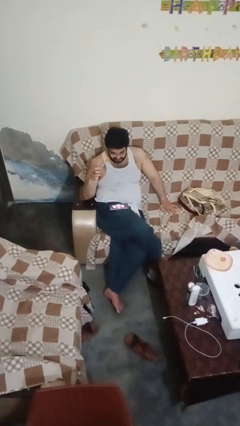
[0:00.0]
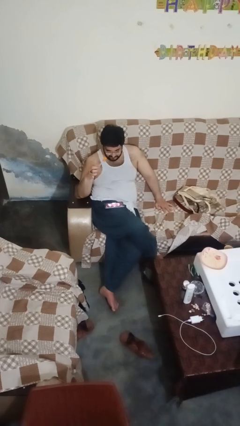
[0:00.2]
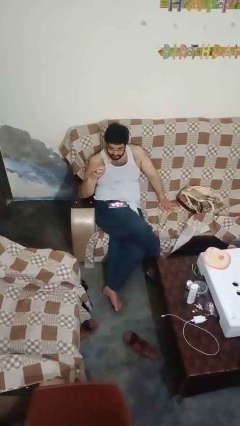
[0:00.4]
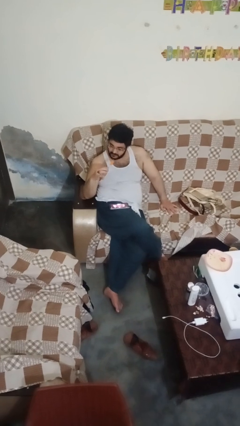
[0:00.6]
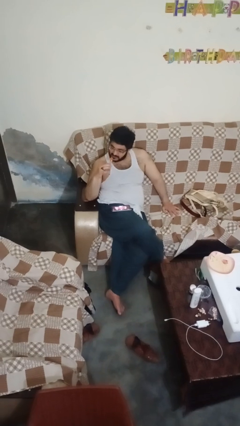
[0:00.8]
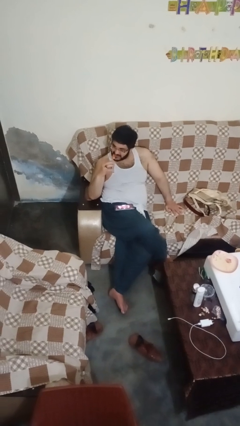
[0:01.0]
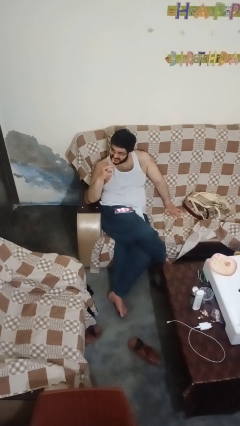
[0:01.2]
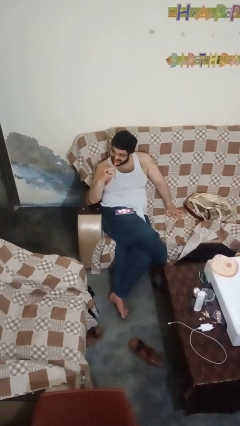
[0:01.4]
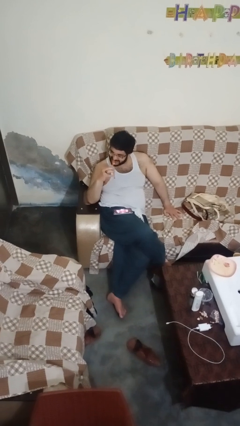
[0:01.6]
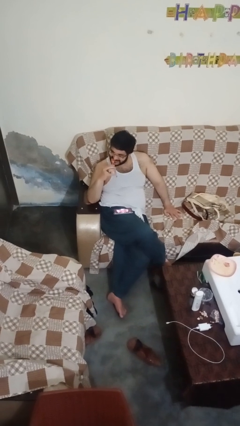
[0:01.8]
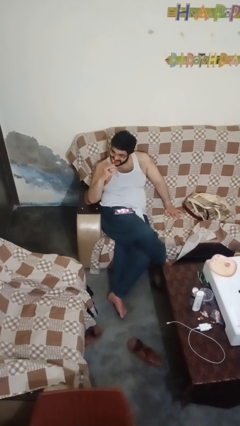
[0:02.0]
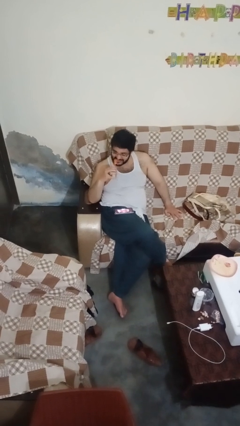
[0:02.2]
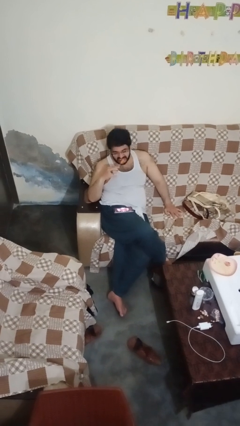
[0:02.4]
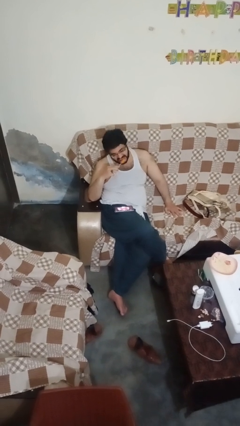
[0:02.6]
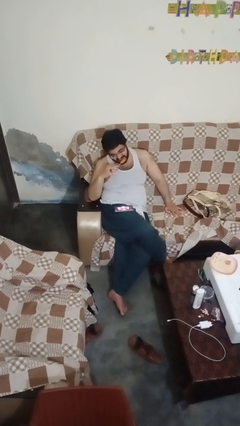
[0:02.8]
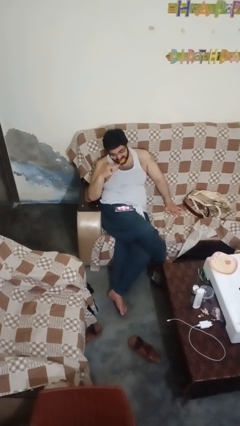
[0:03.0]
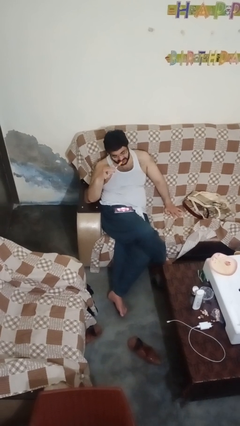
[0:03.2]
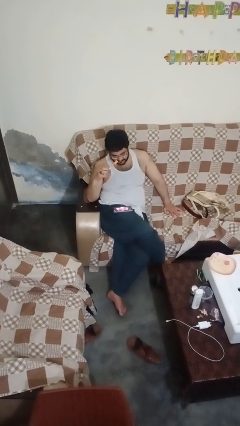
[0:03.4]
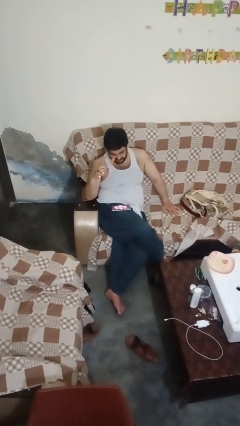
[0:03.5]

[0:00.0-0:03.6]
person brushes teeth

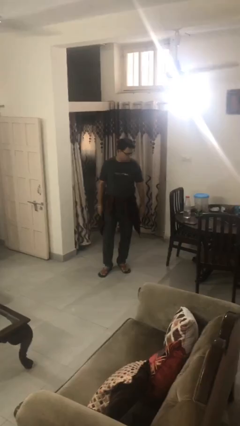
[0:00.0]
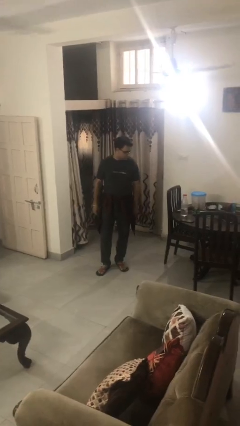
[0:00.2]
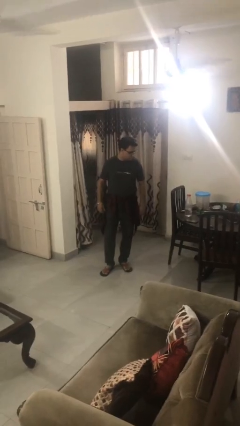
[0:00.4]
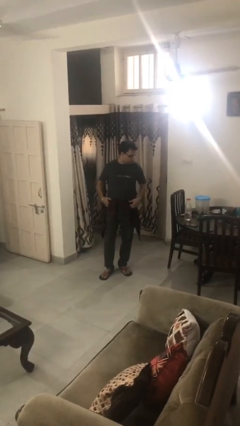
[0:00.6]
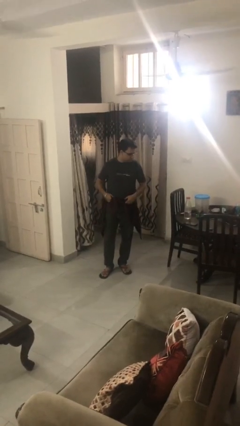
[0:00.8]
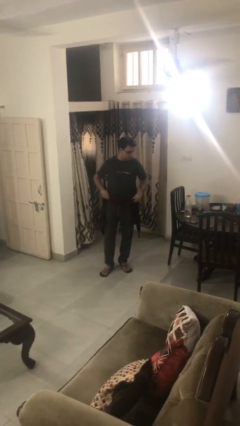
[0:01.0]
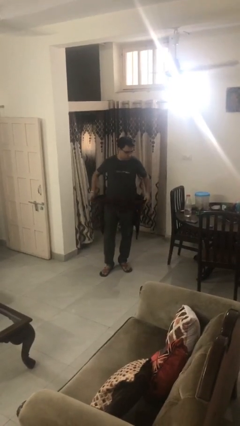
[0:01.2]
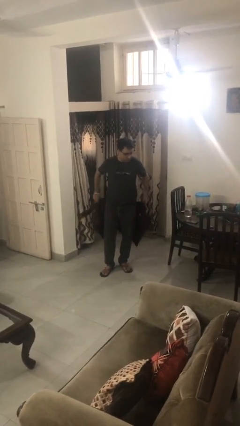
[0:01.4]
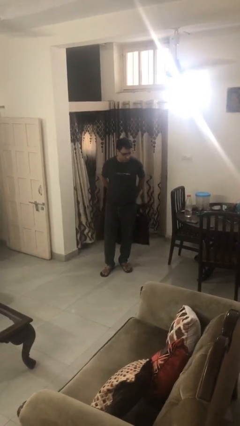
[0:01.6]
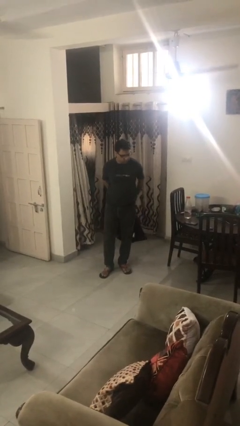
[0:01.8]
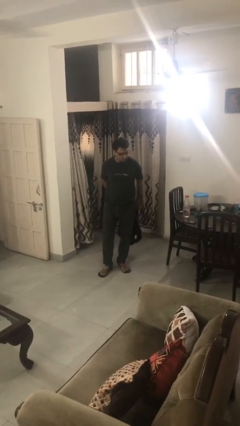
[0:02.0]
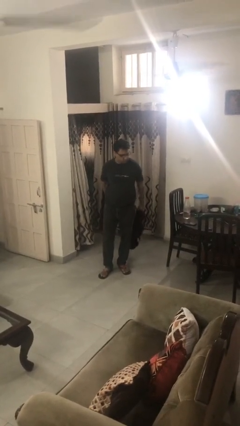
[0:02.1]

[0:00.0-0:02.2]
person unties jacket around waist

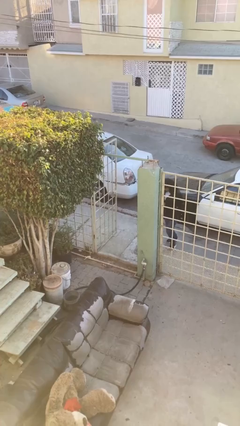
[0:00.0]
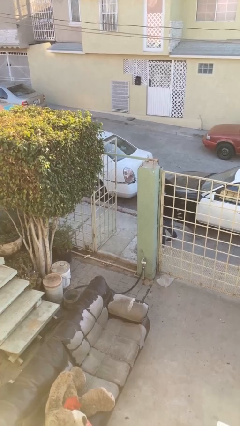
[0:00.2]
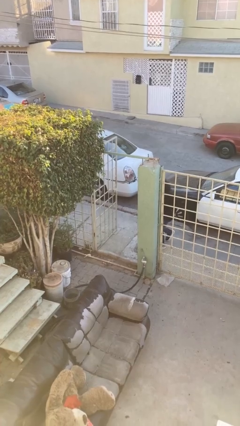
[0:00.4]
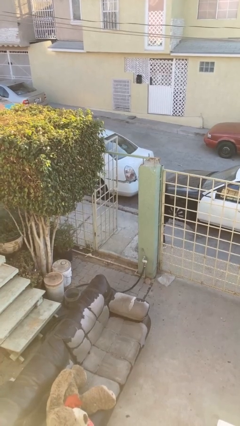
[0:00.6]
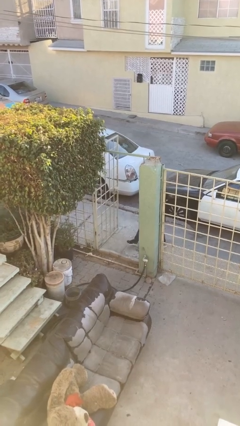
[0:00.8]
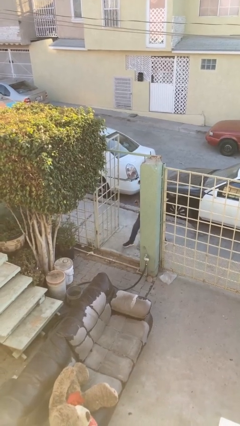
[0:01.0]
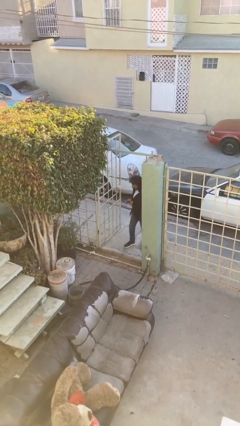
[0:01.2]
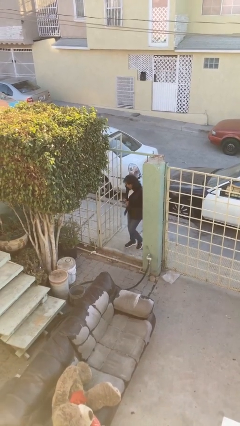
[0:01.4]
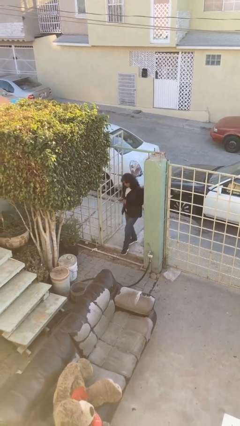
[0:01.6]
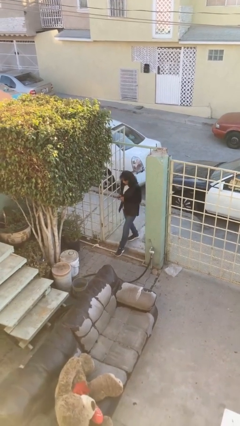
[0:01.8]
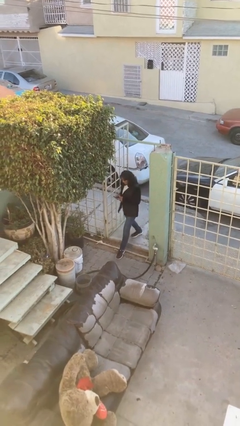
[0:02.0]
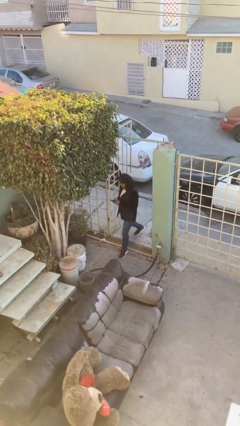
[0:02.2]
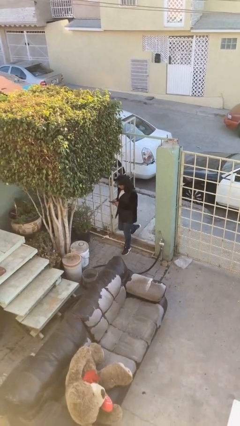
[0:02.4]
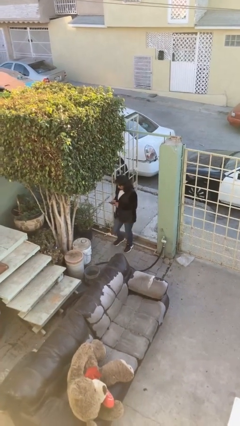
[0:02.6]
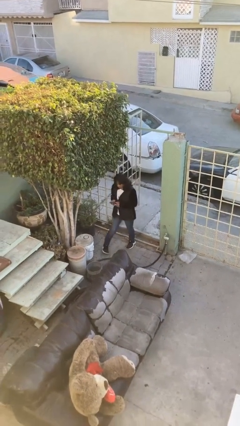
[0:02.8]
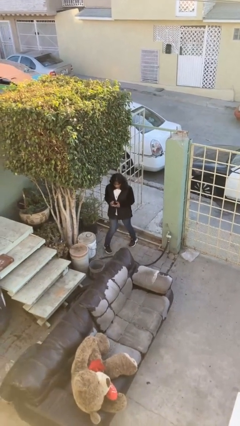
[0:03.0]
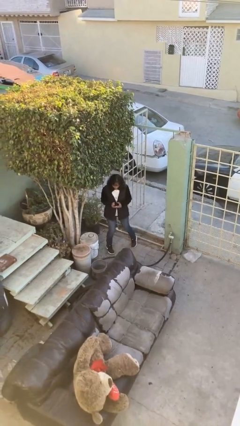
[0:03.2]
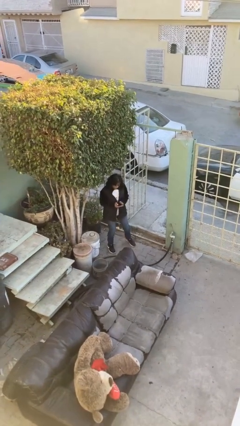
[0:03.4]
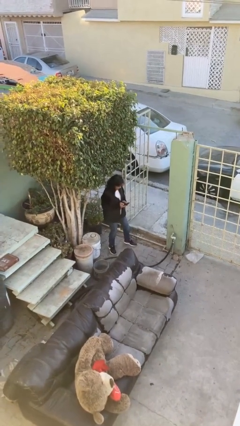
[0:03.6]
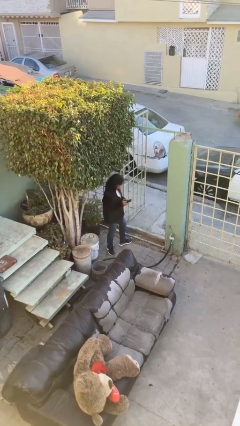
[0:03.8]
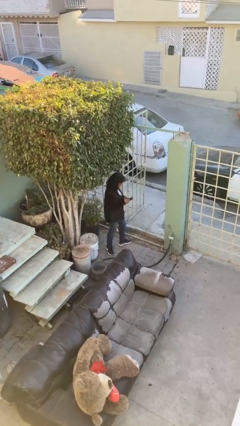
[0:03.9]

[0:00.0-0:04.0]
person enters scene through structure

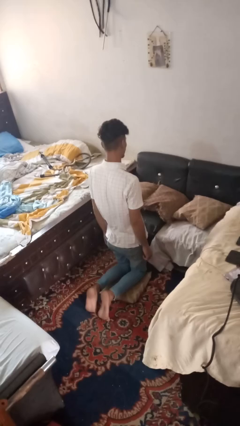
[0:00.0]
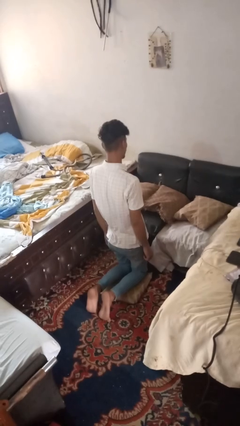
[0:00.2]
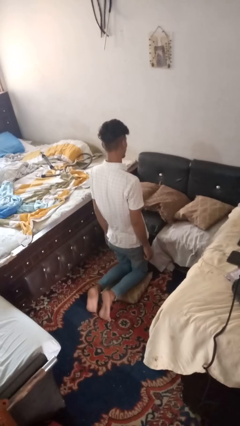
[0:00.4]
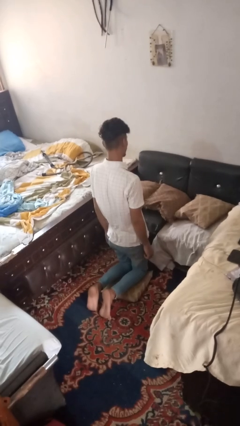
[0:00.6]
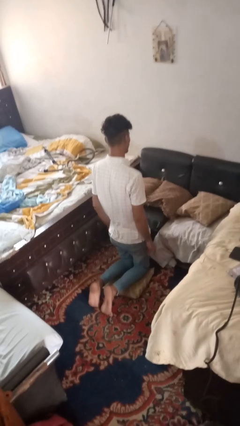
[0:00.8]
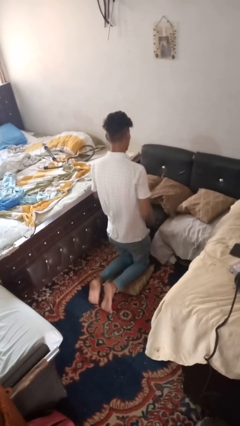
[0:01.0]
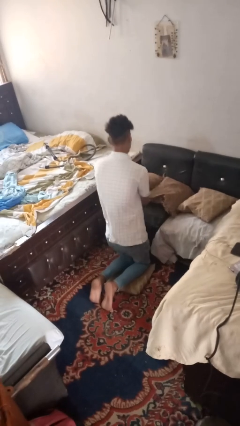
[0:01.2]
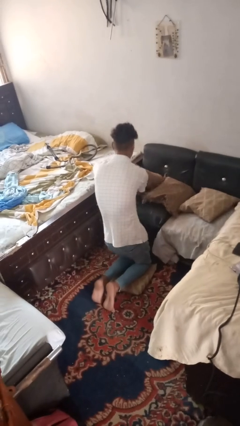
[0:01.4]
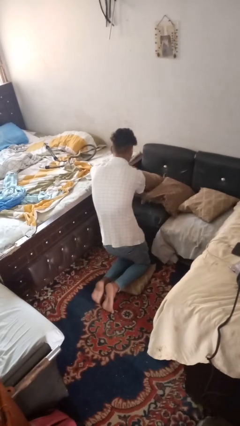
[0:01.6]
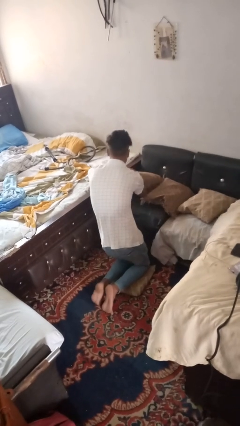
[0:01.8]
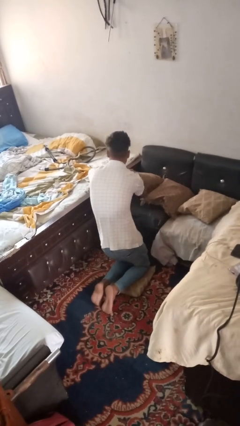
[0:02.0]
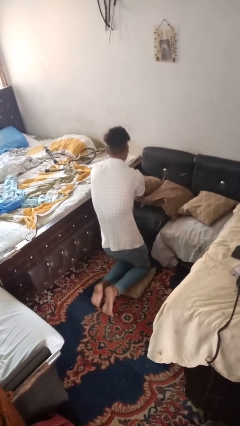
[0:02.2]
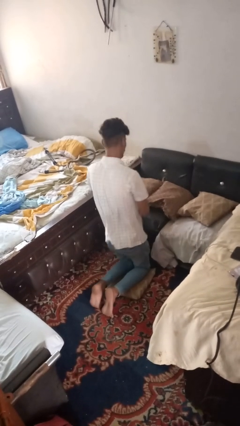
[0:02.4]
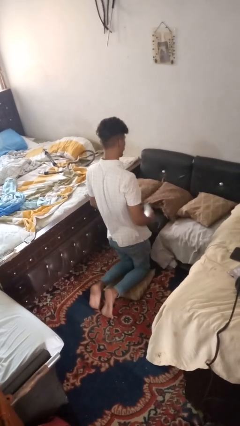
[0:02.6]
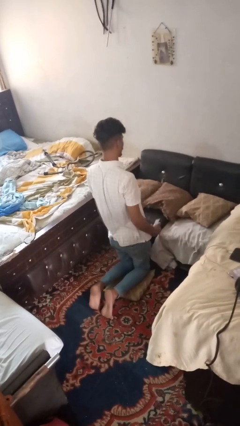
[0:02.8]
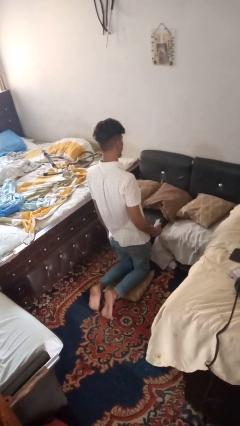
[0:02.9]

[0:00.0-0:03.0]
person searches in couch

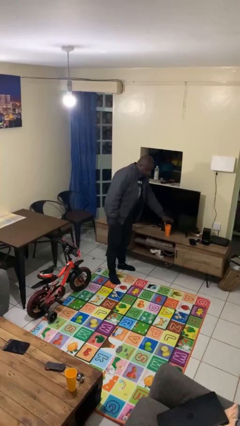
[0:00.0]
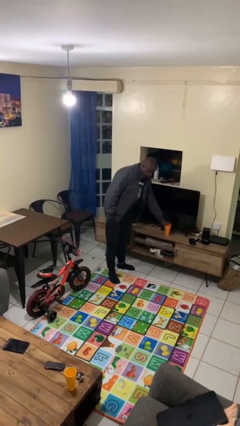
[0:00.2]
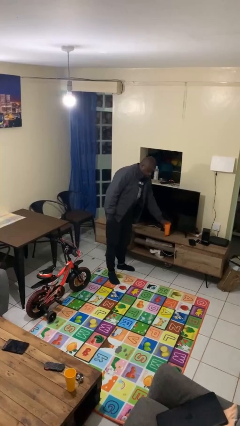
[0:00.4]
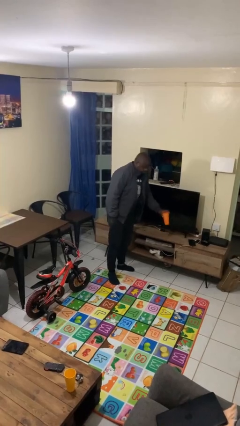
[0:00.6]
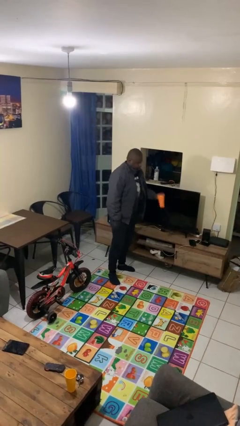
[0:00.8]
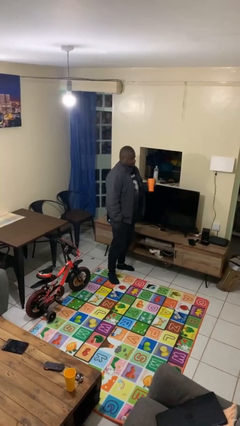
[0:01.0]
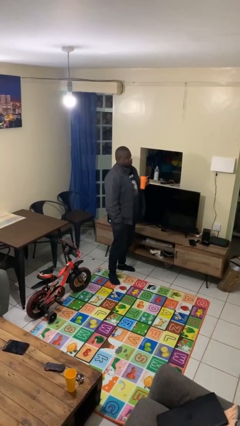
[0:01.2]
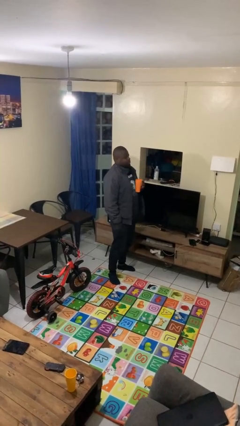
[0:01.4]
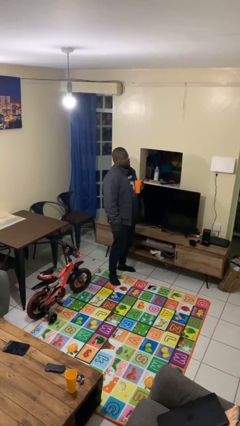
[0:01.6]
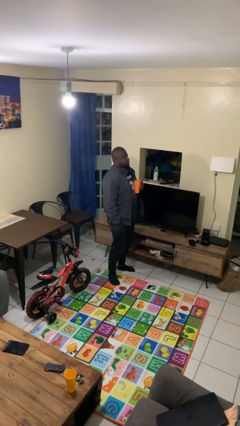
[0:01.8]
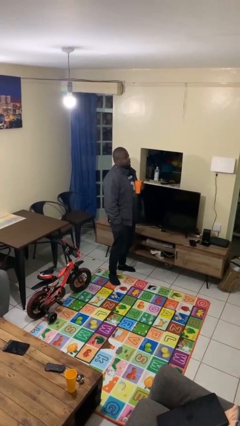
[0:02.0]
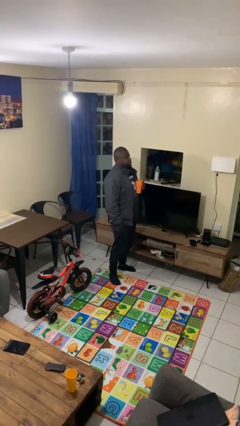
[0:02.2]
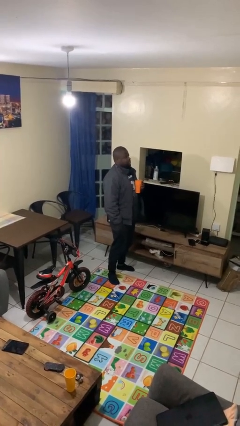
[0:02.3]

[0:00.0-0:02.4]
person picks up object from countertop

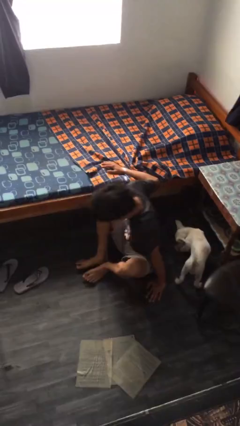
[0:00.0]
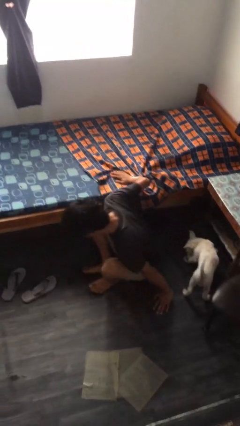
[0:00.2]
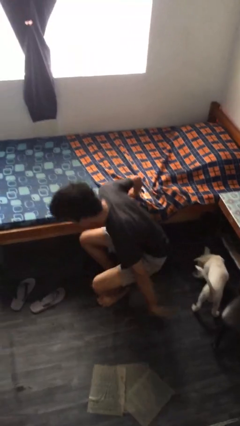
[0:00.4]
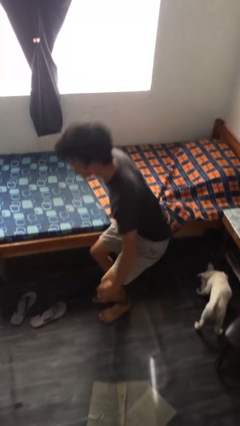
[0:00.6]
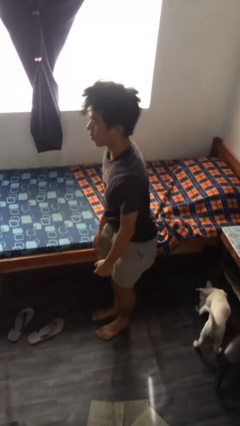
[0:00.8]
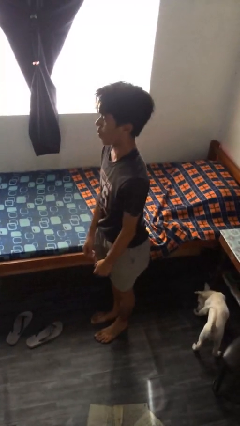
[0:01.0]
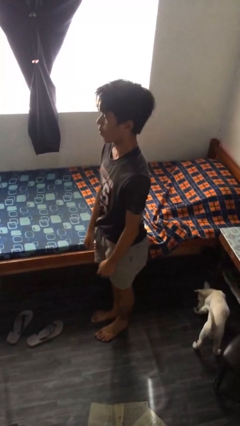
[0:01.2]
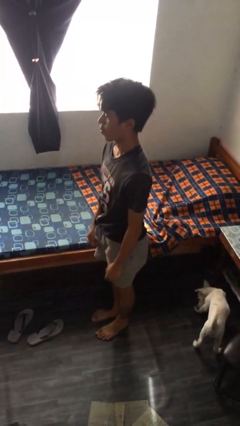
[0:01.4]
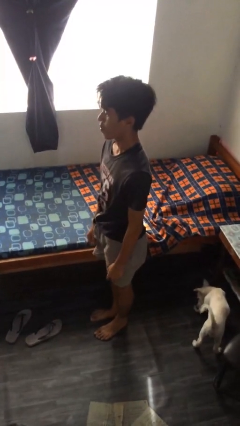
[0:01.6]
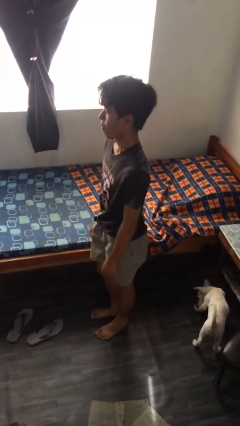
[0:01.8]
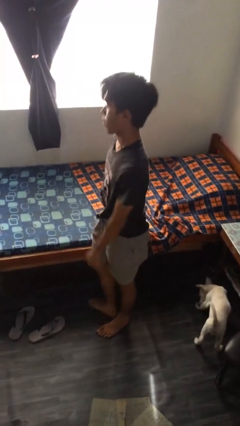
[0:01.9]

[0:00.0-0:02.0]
person stands up from floor

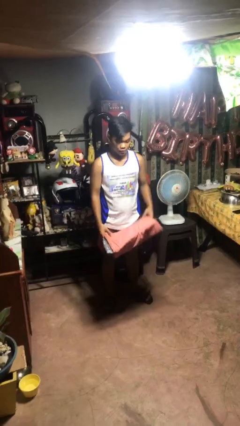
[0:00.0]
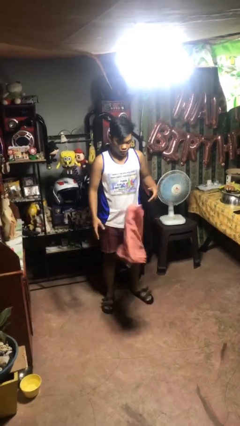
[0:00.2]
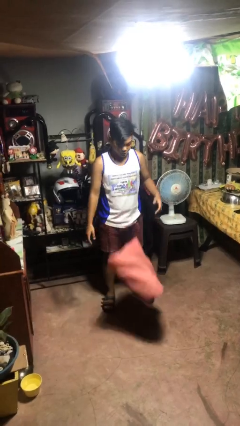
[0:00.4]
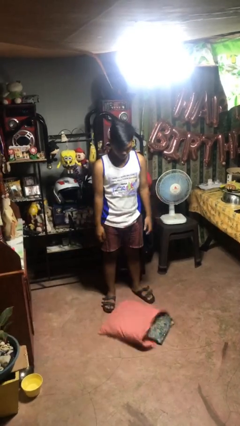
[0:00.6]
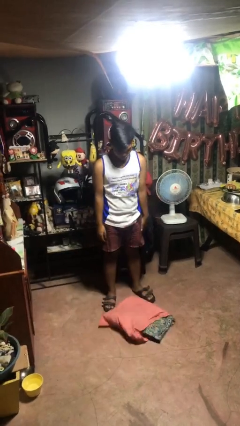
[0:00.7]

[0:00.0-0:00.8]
person drops object
